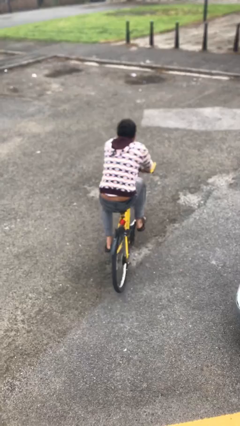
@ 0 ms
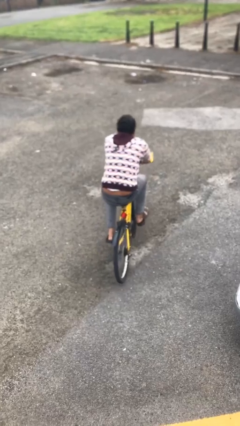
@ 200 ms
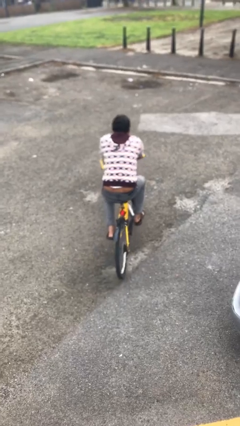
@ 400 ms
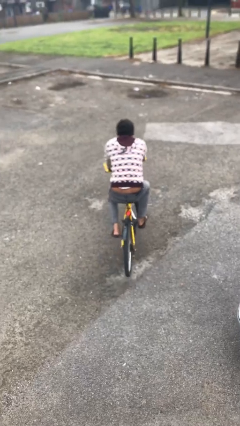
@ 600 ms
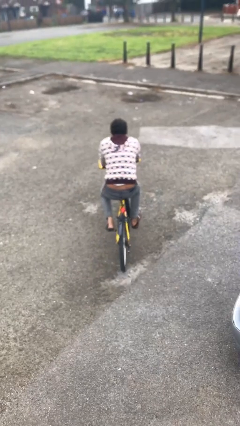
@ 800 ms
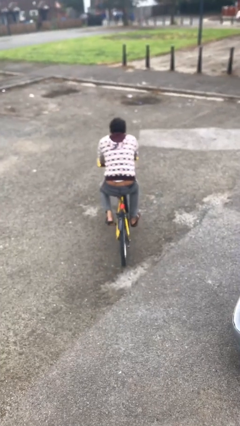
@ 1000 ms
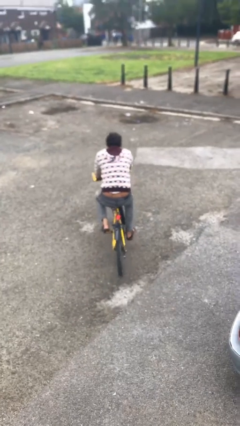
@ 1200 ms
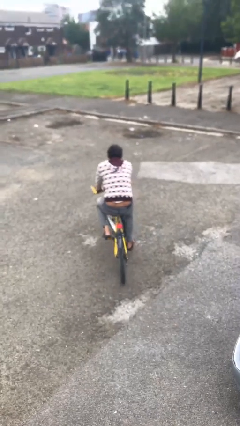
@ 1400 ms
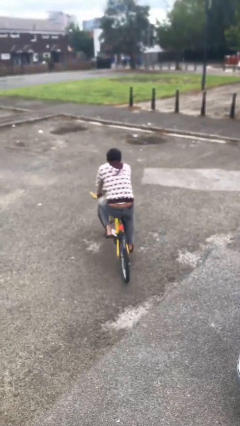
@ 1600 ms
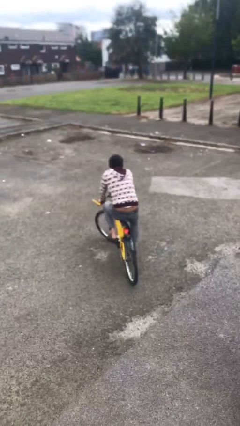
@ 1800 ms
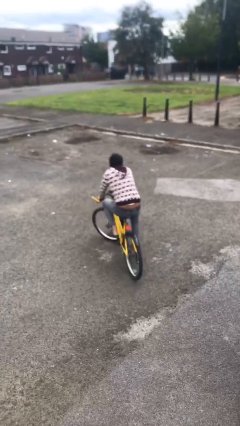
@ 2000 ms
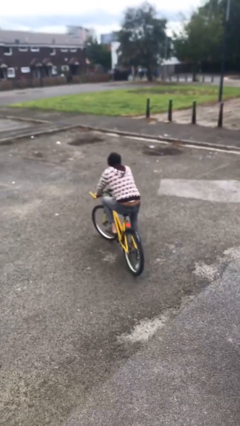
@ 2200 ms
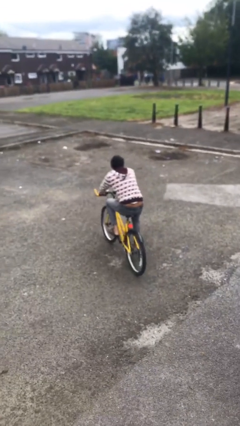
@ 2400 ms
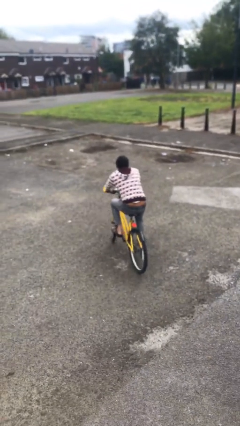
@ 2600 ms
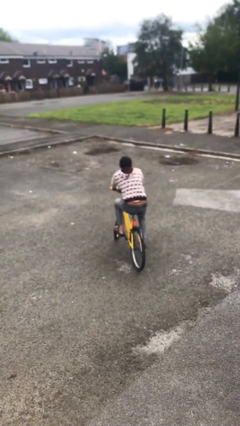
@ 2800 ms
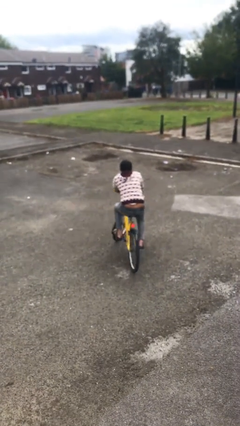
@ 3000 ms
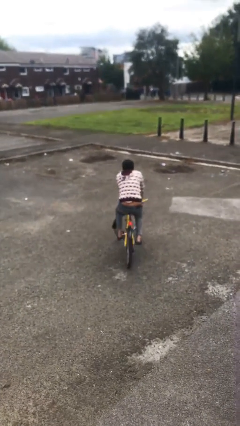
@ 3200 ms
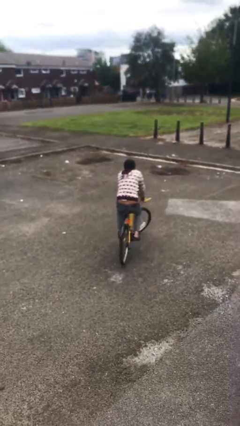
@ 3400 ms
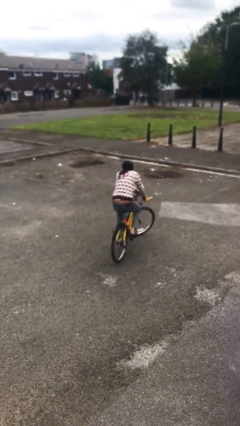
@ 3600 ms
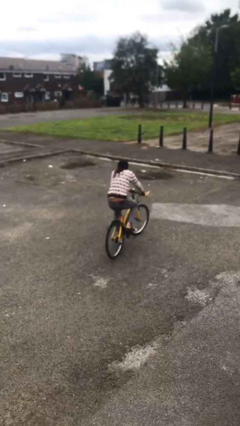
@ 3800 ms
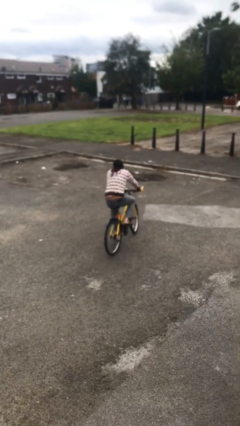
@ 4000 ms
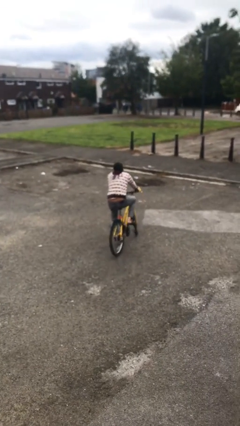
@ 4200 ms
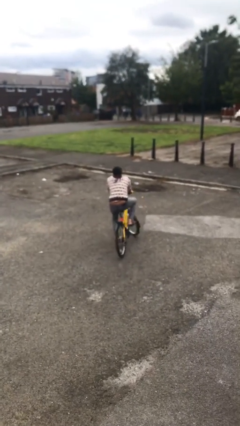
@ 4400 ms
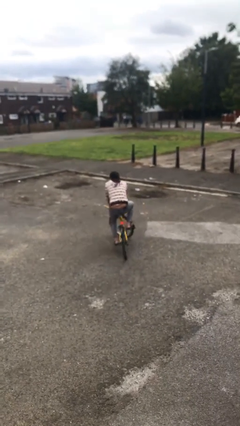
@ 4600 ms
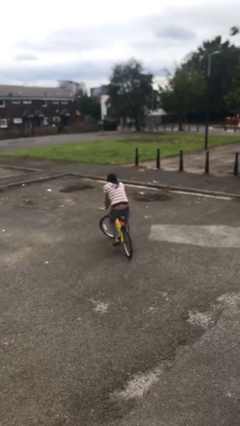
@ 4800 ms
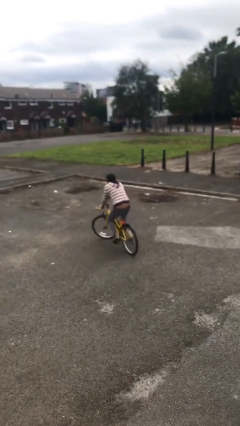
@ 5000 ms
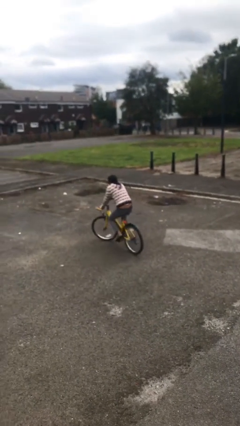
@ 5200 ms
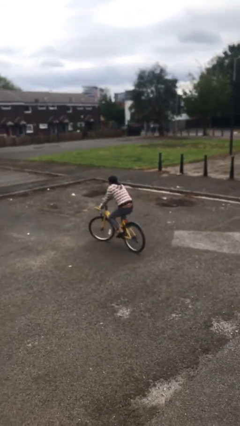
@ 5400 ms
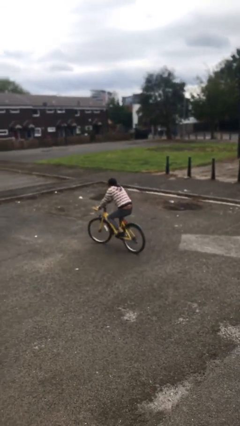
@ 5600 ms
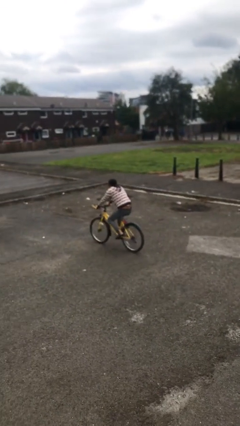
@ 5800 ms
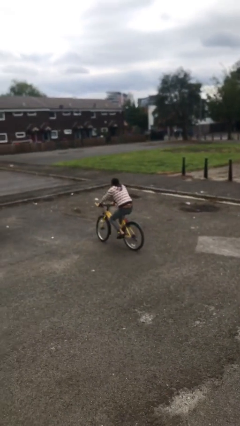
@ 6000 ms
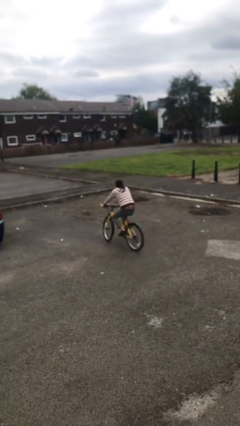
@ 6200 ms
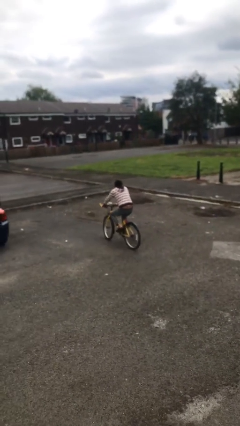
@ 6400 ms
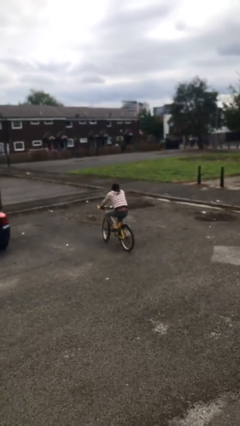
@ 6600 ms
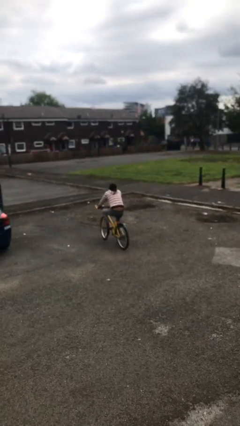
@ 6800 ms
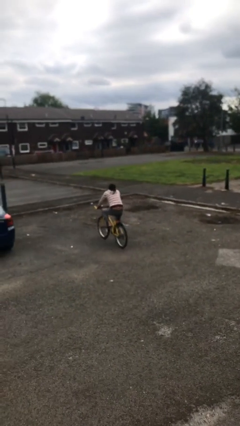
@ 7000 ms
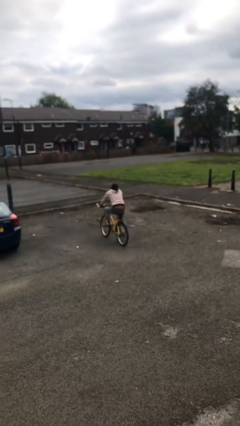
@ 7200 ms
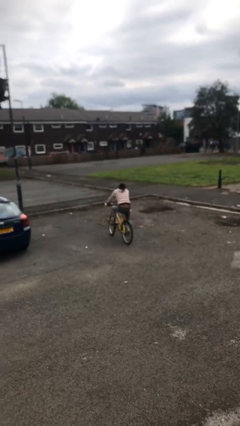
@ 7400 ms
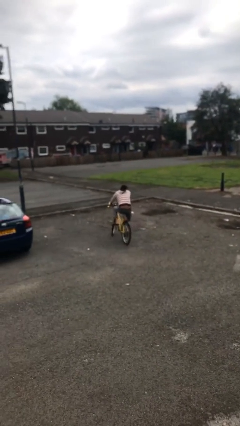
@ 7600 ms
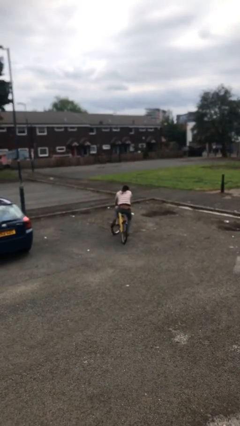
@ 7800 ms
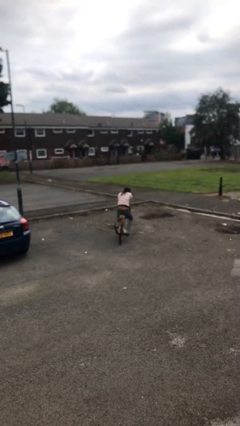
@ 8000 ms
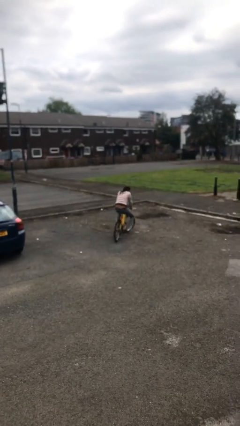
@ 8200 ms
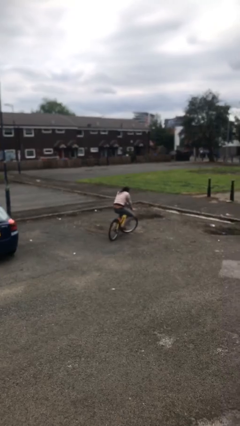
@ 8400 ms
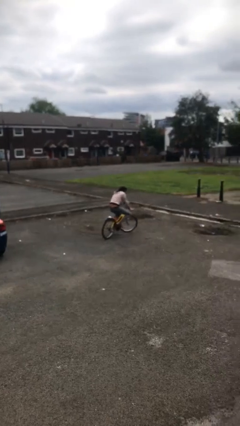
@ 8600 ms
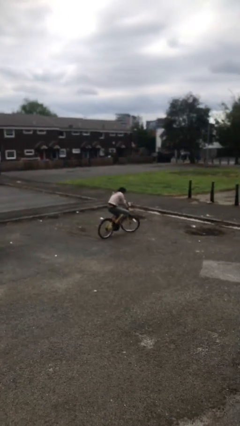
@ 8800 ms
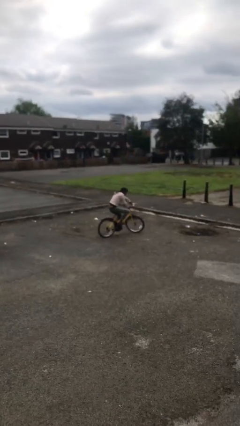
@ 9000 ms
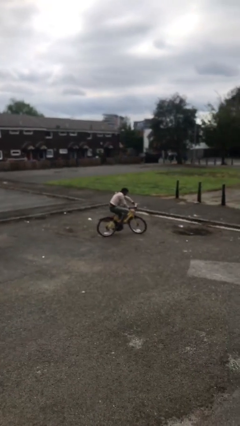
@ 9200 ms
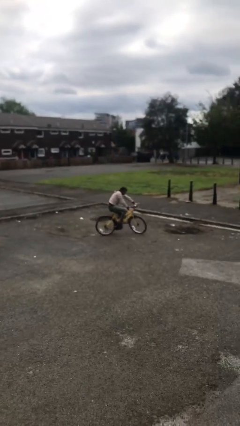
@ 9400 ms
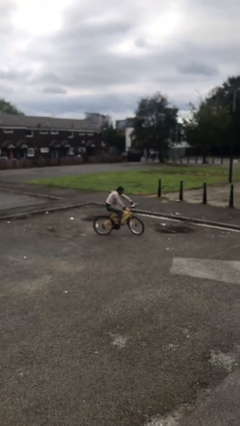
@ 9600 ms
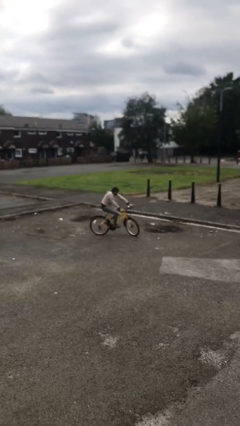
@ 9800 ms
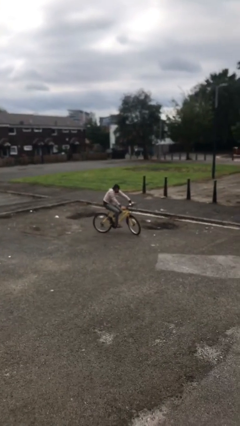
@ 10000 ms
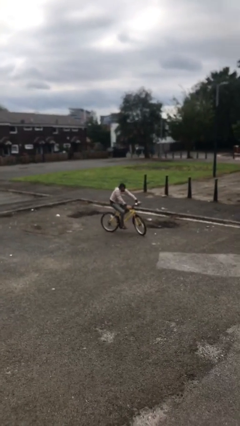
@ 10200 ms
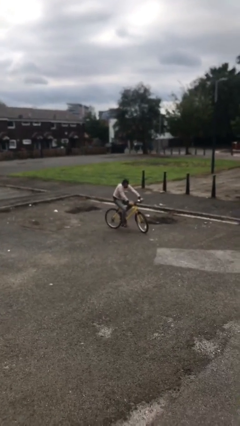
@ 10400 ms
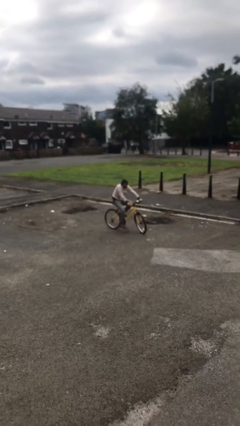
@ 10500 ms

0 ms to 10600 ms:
person rides bicycle

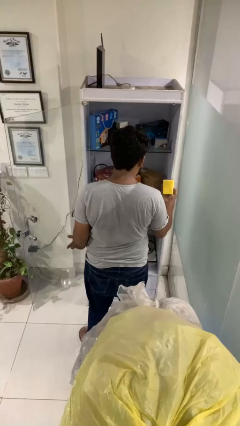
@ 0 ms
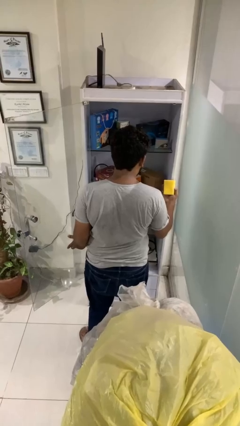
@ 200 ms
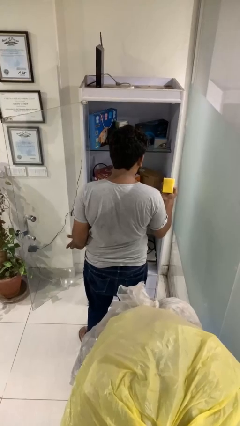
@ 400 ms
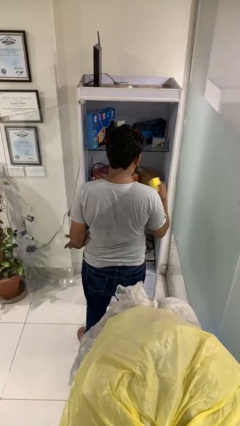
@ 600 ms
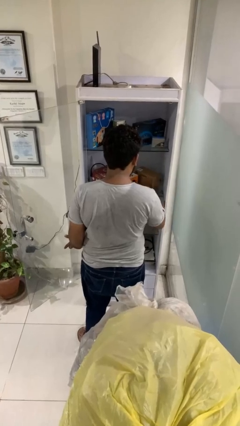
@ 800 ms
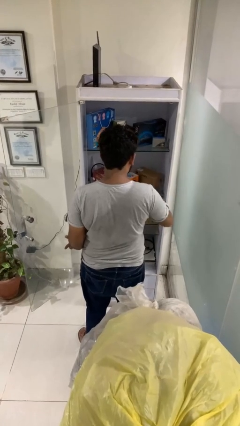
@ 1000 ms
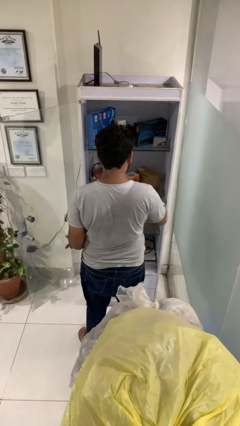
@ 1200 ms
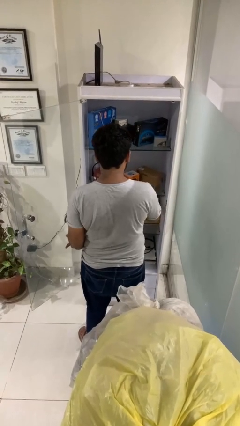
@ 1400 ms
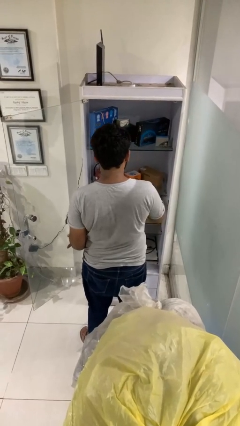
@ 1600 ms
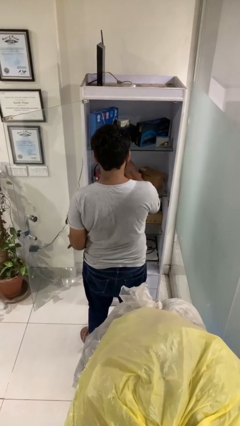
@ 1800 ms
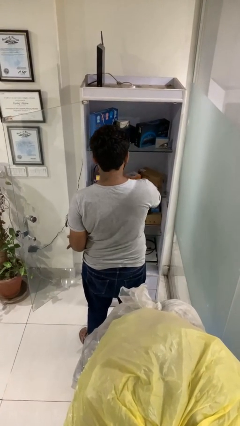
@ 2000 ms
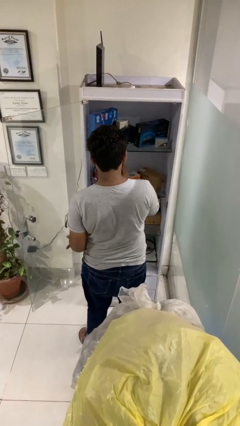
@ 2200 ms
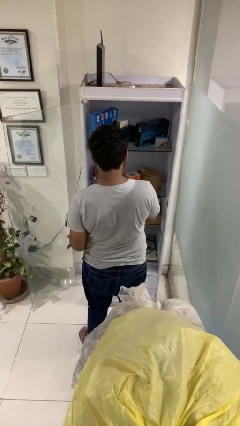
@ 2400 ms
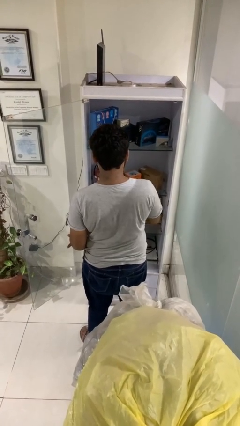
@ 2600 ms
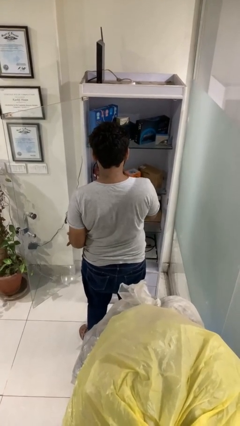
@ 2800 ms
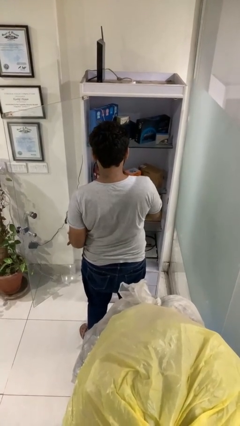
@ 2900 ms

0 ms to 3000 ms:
person dusts furniture

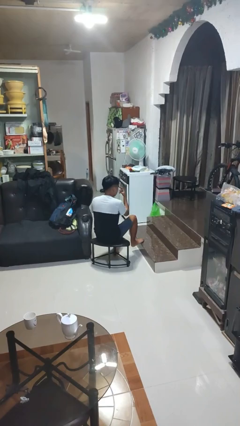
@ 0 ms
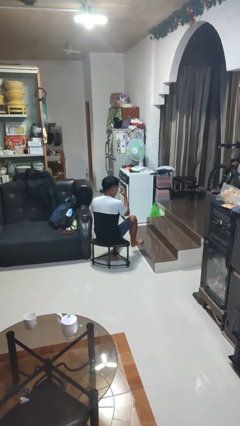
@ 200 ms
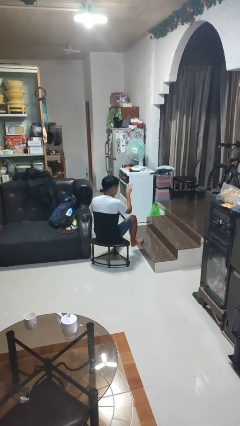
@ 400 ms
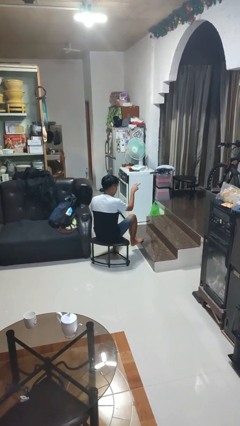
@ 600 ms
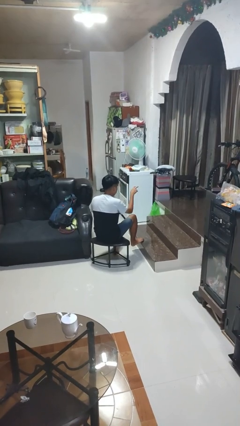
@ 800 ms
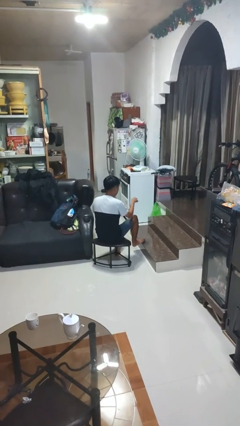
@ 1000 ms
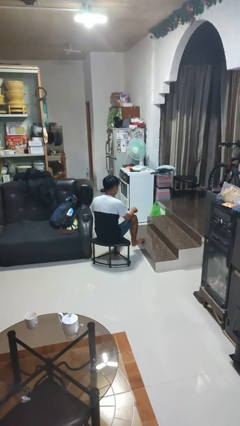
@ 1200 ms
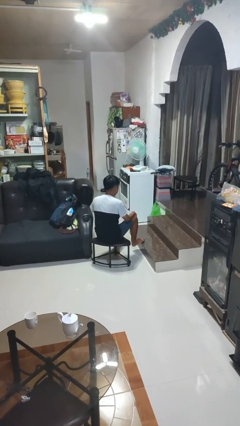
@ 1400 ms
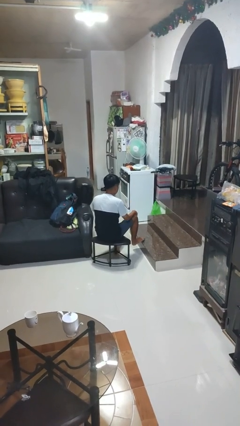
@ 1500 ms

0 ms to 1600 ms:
person gestures watch closely

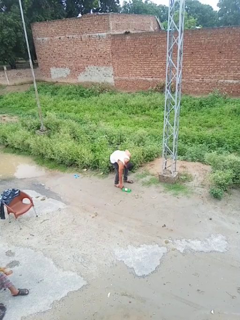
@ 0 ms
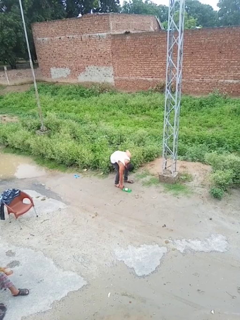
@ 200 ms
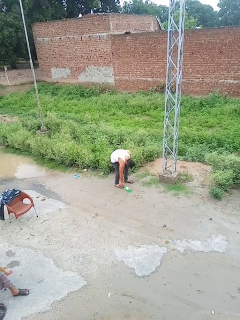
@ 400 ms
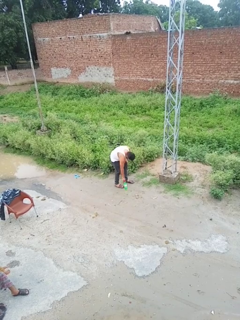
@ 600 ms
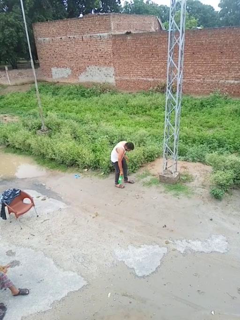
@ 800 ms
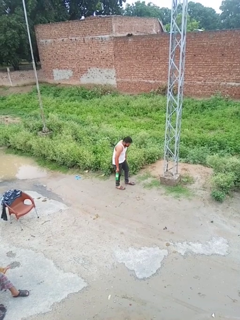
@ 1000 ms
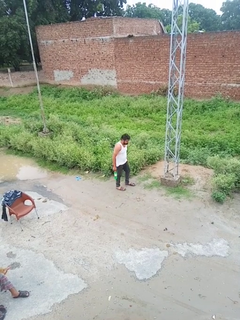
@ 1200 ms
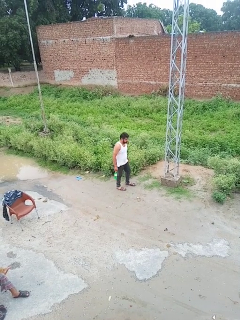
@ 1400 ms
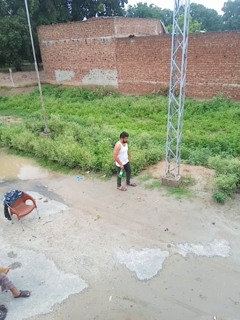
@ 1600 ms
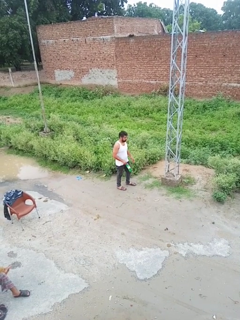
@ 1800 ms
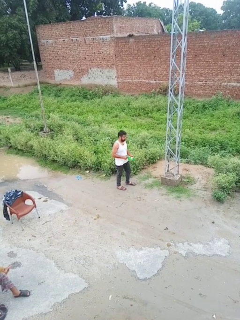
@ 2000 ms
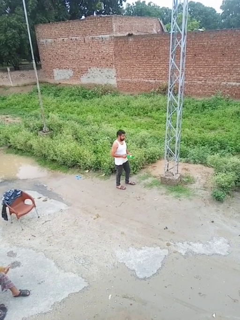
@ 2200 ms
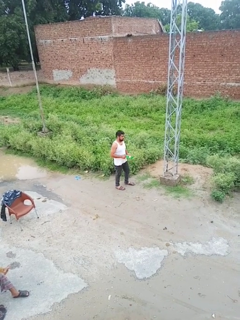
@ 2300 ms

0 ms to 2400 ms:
person picks up object from floor

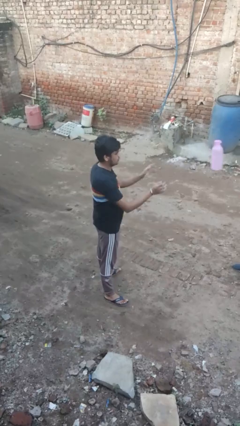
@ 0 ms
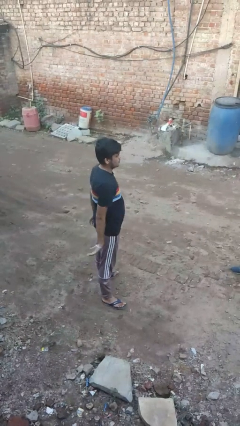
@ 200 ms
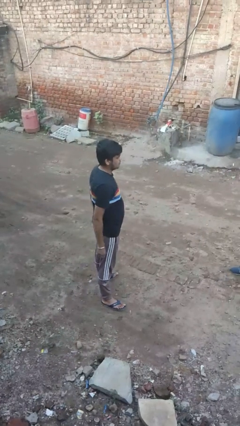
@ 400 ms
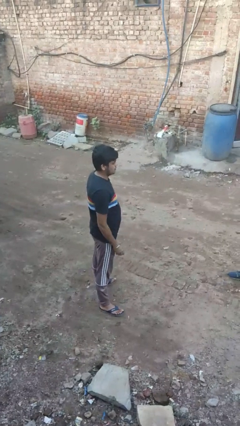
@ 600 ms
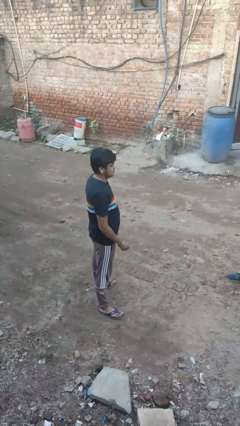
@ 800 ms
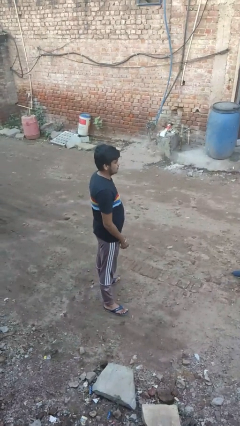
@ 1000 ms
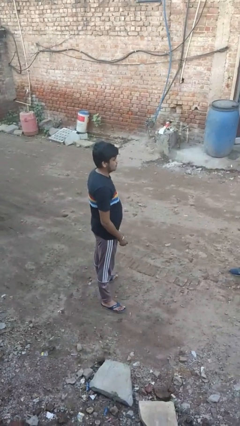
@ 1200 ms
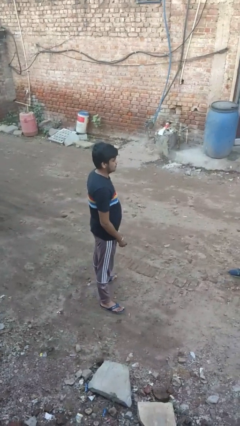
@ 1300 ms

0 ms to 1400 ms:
person throws object to person
